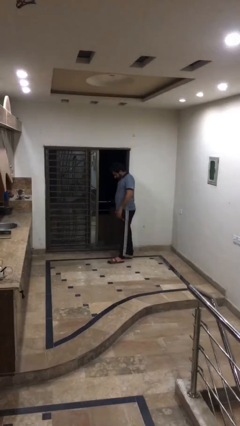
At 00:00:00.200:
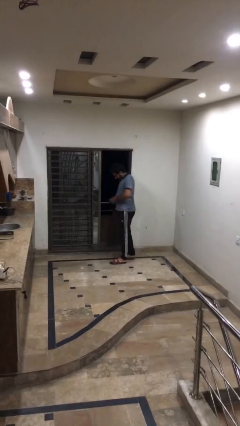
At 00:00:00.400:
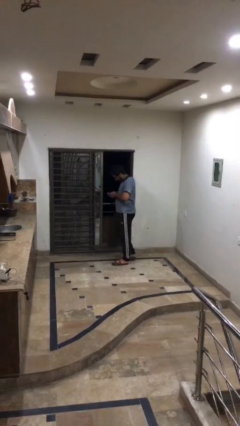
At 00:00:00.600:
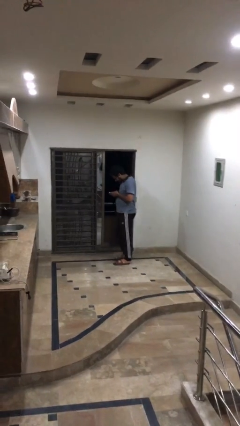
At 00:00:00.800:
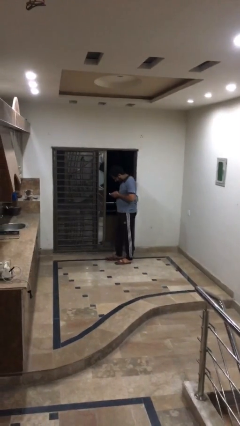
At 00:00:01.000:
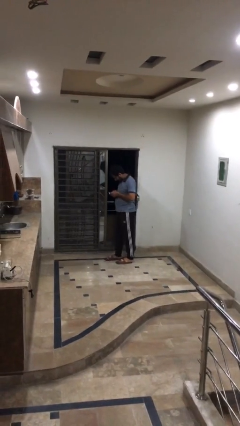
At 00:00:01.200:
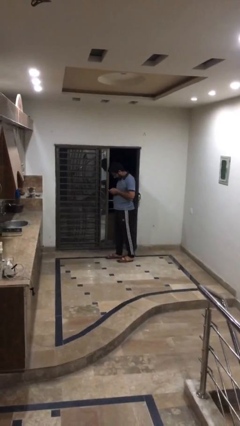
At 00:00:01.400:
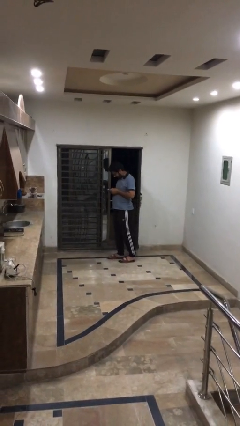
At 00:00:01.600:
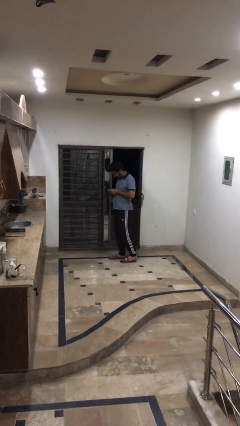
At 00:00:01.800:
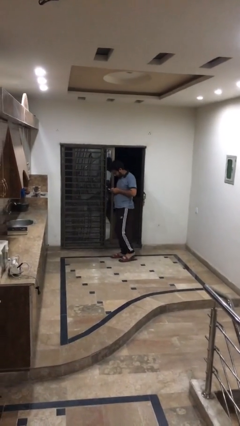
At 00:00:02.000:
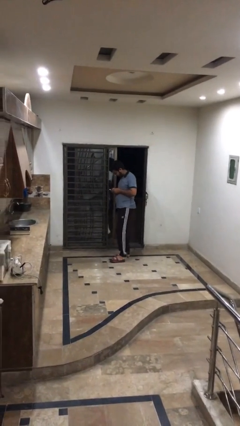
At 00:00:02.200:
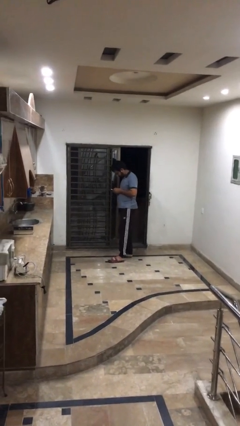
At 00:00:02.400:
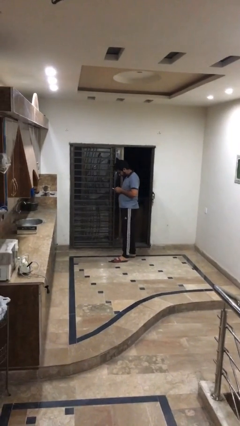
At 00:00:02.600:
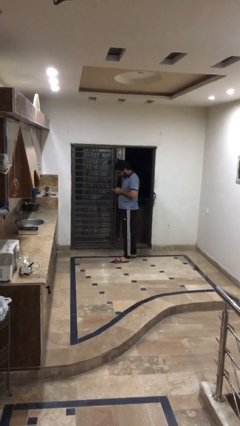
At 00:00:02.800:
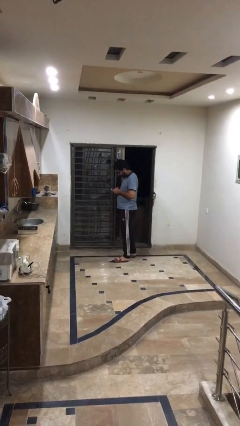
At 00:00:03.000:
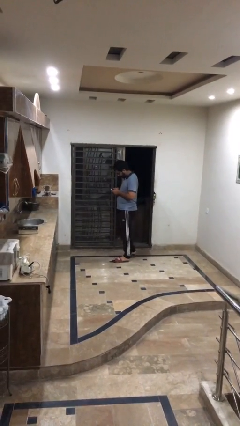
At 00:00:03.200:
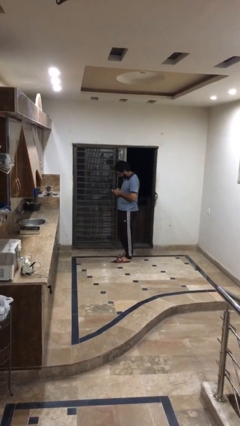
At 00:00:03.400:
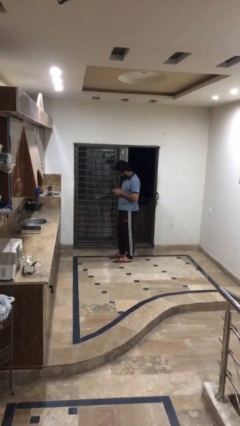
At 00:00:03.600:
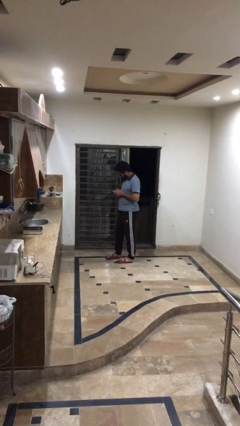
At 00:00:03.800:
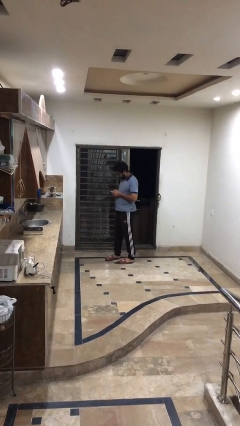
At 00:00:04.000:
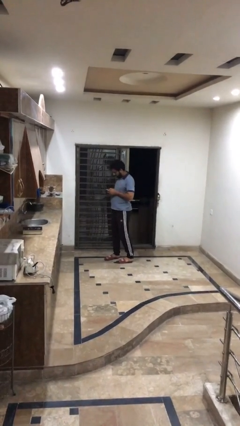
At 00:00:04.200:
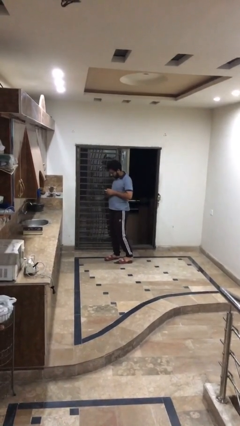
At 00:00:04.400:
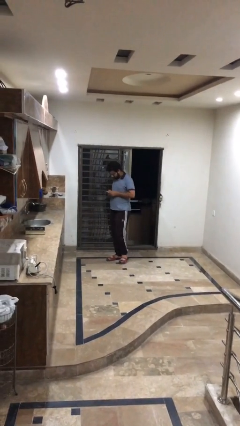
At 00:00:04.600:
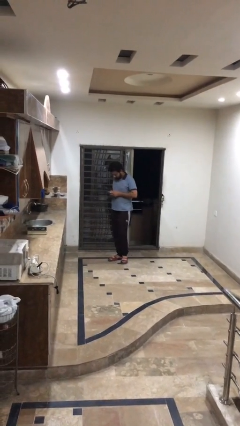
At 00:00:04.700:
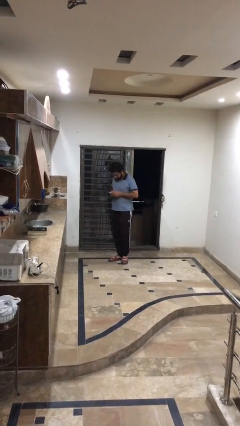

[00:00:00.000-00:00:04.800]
person texts on phone

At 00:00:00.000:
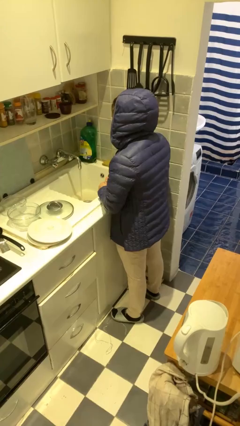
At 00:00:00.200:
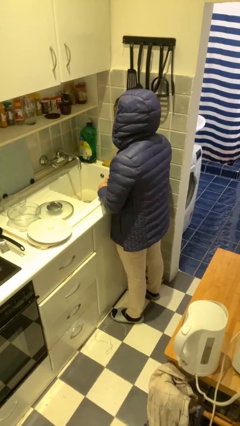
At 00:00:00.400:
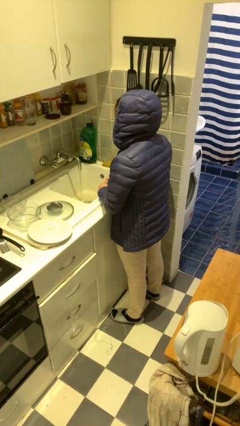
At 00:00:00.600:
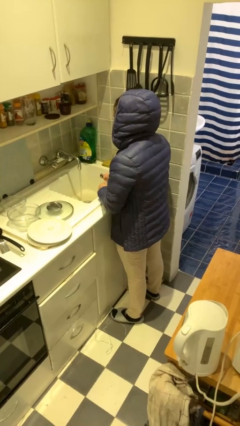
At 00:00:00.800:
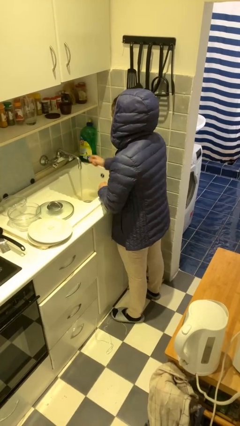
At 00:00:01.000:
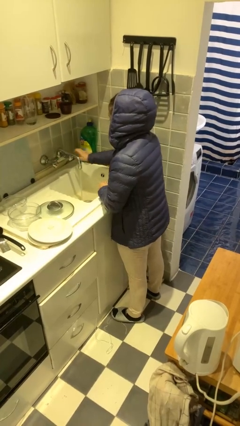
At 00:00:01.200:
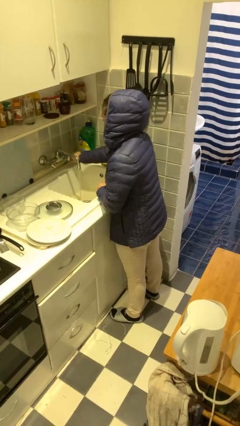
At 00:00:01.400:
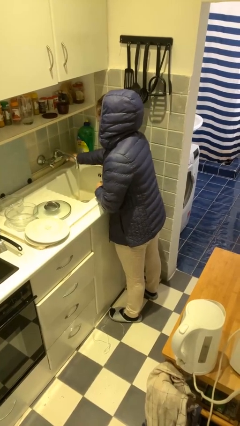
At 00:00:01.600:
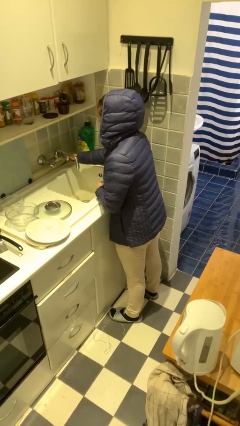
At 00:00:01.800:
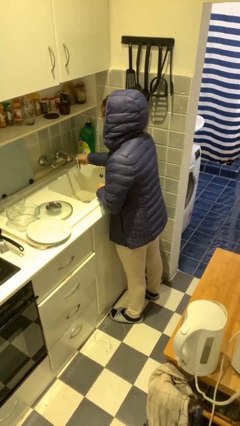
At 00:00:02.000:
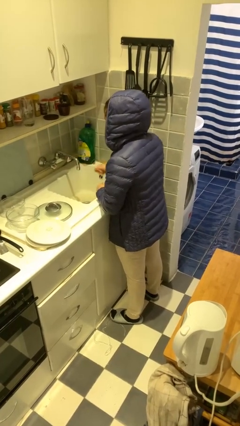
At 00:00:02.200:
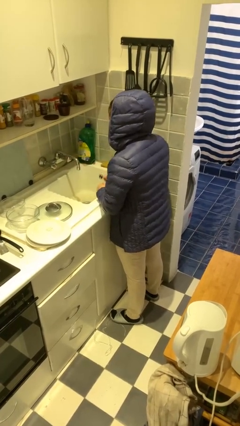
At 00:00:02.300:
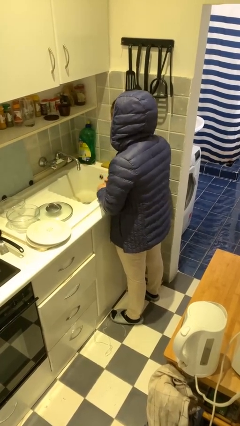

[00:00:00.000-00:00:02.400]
person turns off faucet

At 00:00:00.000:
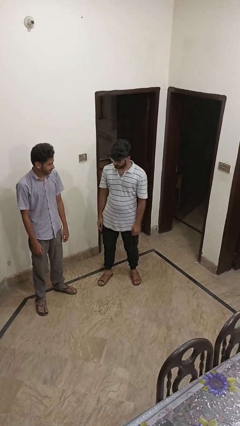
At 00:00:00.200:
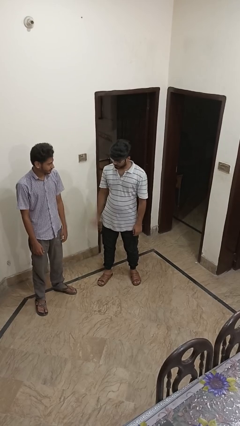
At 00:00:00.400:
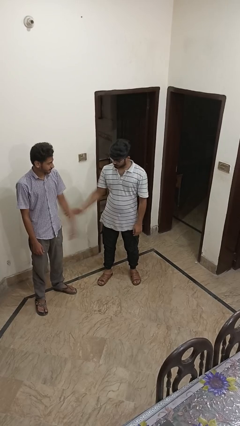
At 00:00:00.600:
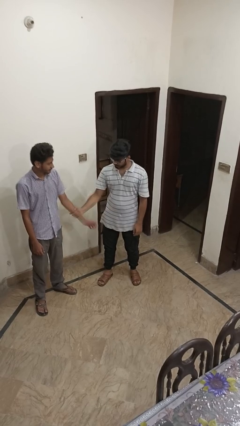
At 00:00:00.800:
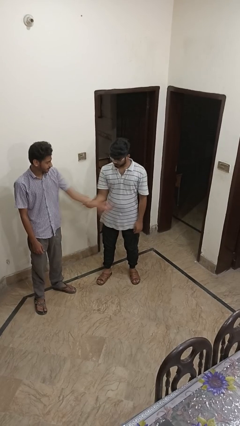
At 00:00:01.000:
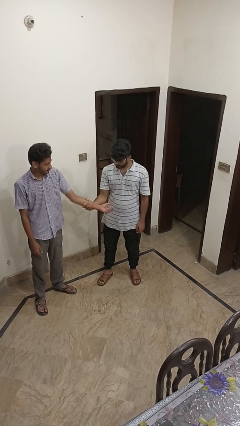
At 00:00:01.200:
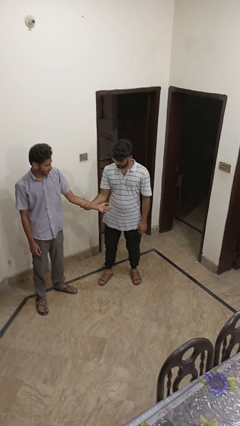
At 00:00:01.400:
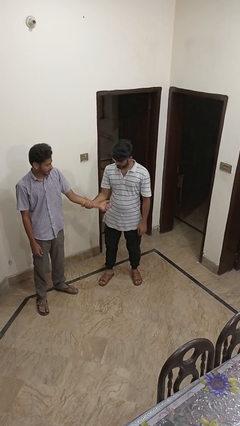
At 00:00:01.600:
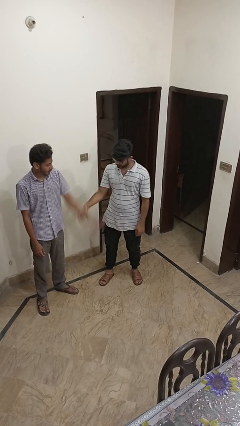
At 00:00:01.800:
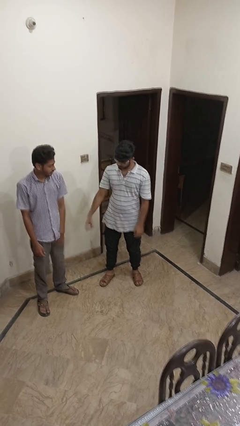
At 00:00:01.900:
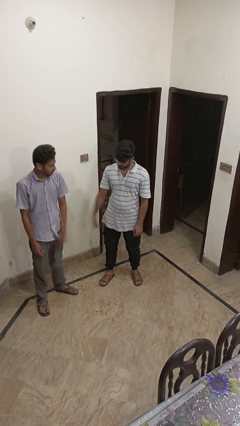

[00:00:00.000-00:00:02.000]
person grabs person by forearm

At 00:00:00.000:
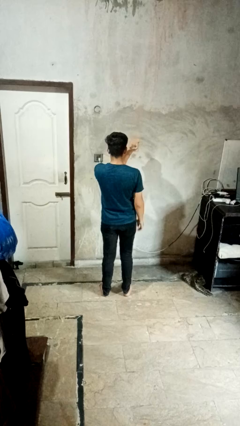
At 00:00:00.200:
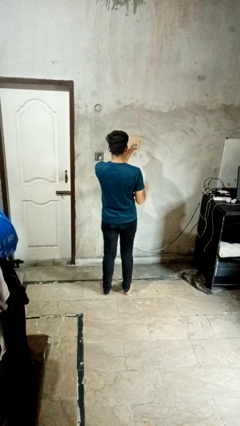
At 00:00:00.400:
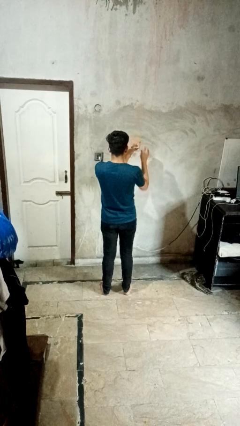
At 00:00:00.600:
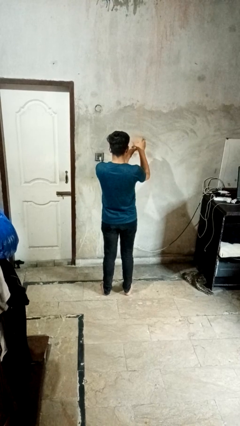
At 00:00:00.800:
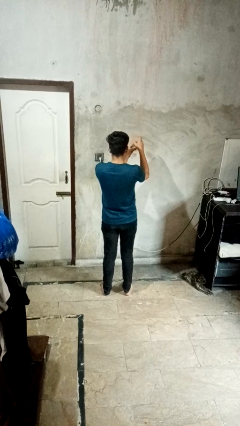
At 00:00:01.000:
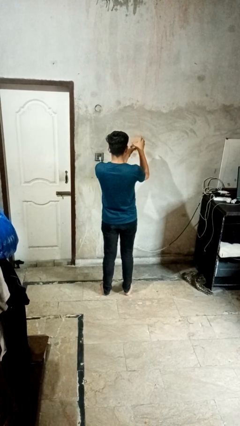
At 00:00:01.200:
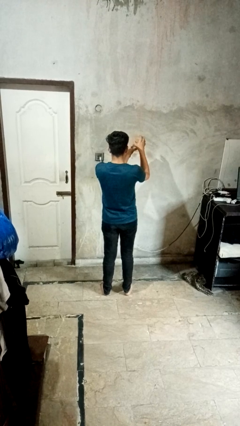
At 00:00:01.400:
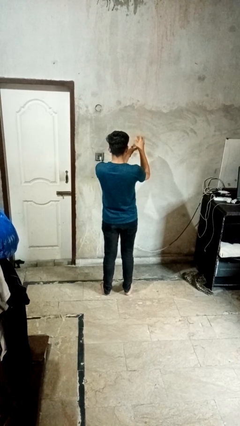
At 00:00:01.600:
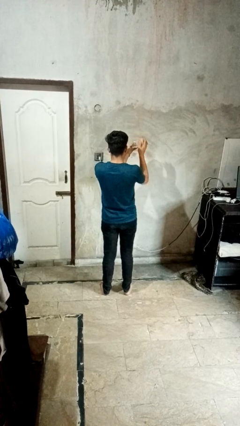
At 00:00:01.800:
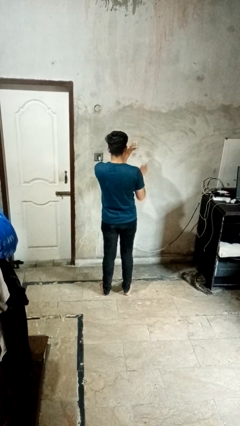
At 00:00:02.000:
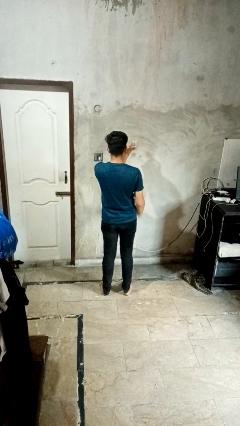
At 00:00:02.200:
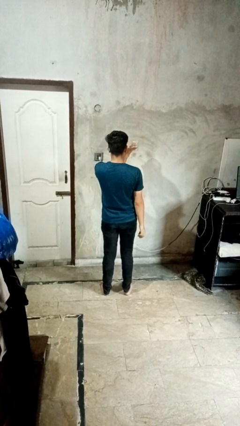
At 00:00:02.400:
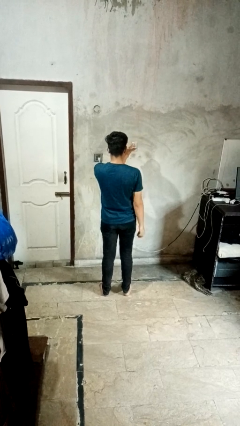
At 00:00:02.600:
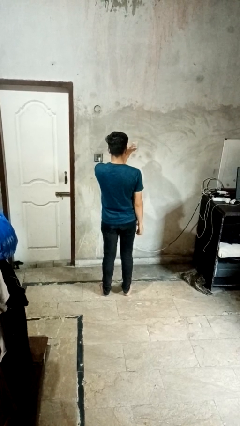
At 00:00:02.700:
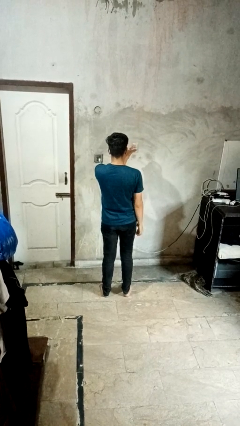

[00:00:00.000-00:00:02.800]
person opens jar

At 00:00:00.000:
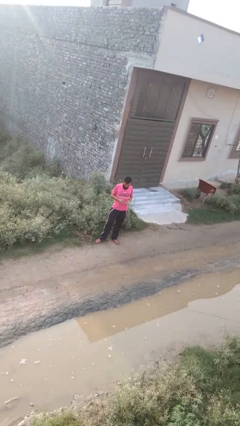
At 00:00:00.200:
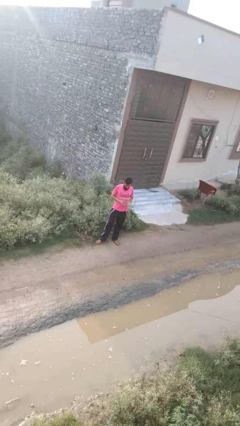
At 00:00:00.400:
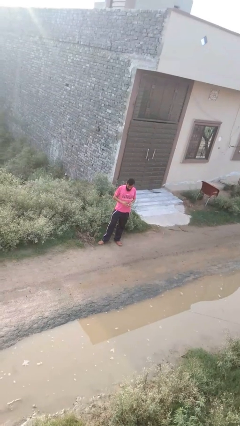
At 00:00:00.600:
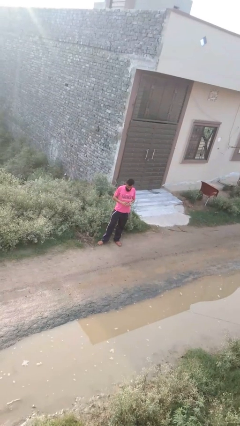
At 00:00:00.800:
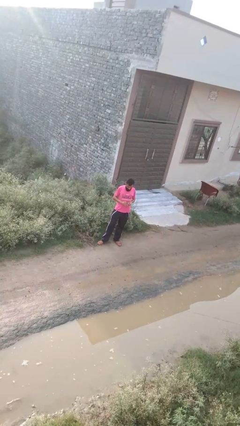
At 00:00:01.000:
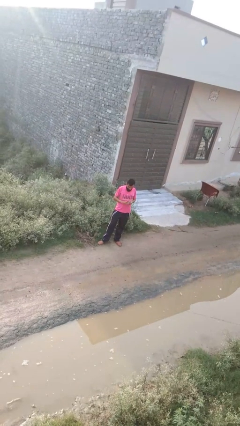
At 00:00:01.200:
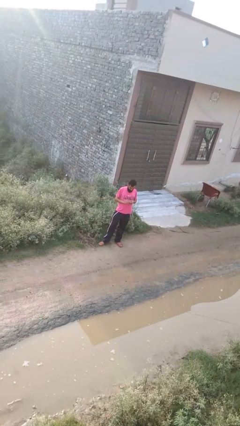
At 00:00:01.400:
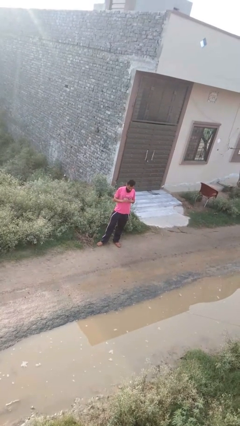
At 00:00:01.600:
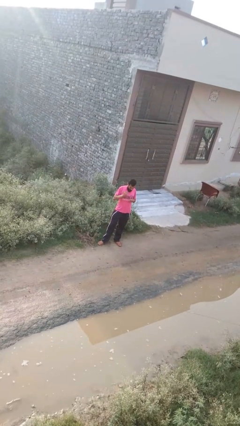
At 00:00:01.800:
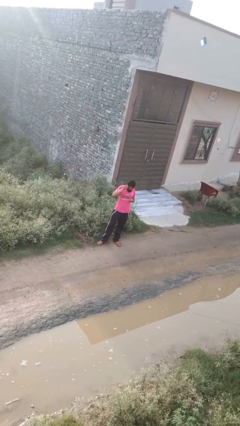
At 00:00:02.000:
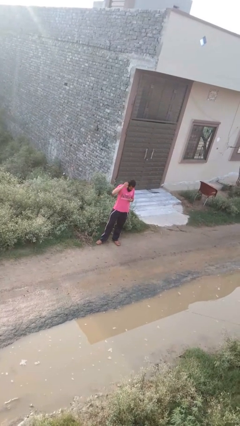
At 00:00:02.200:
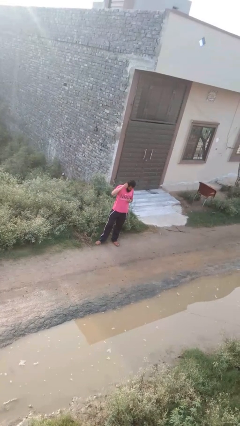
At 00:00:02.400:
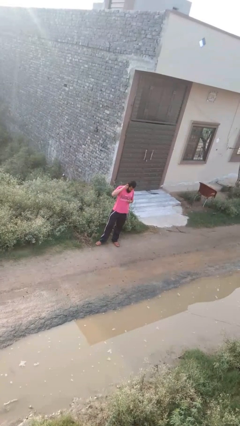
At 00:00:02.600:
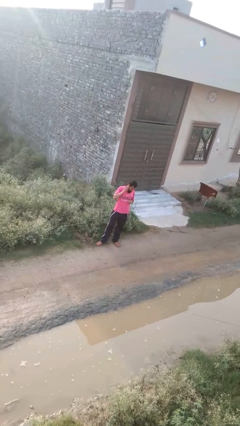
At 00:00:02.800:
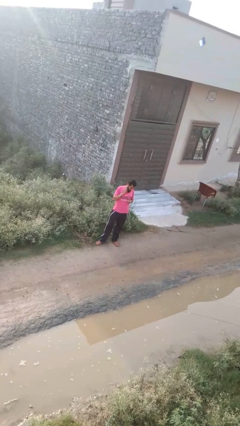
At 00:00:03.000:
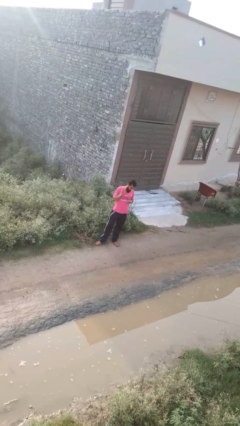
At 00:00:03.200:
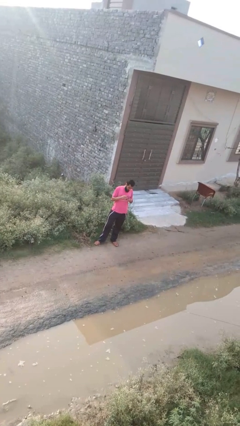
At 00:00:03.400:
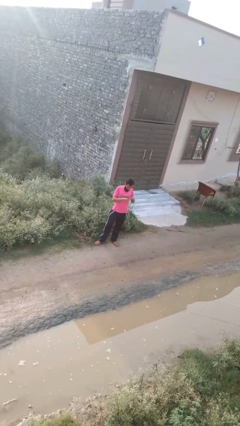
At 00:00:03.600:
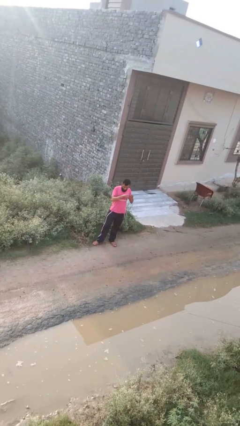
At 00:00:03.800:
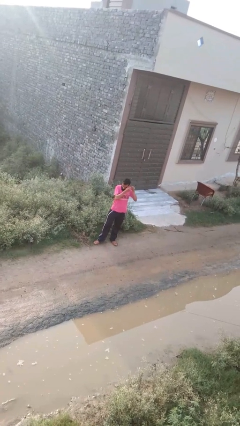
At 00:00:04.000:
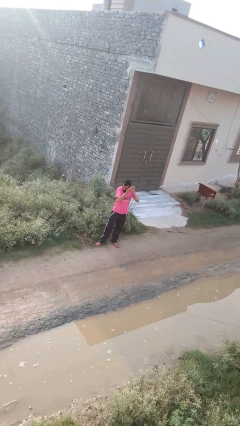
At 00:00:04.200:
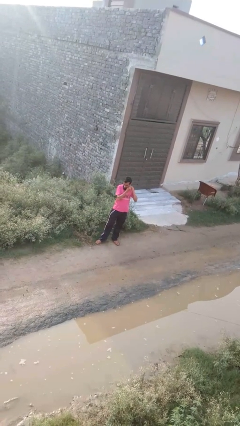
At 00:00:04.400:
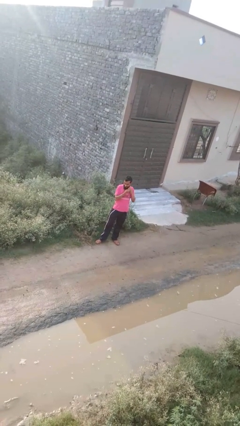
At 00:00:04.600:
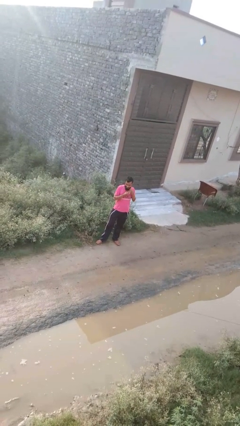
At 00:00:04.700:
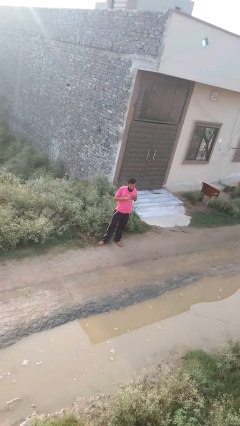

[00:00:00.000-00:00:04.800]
person puts on earrings

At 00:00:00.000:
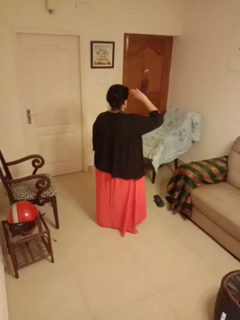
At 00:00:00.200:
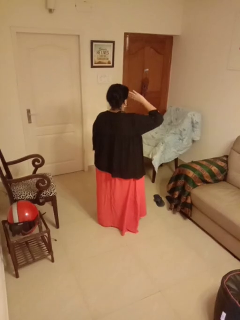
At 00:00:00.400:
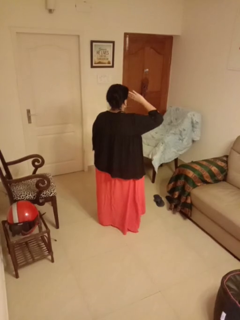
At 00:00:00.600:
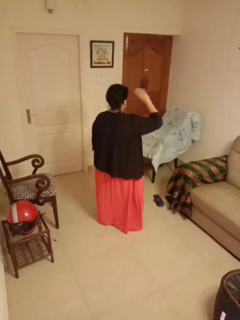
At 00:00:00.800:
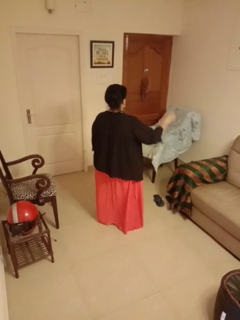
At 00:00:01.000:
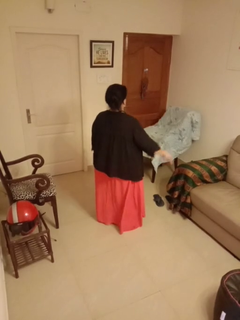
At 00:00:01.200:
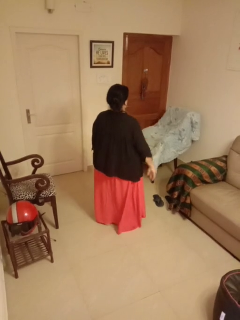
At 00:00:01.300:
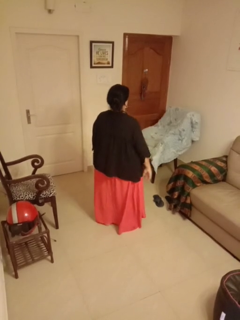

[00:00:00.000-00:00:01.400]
person salutes
